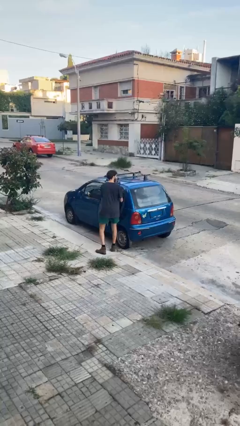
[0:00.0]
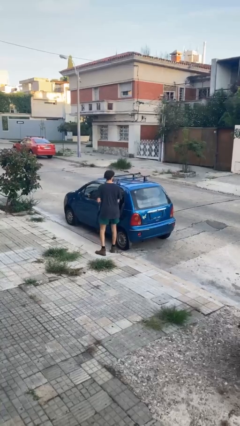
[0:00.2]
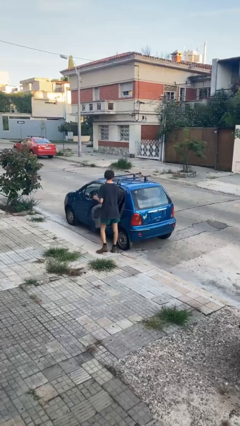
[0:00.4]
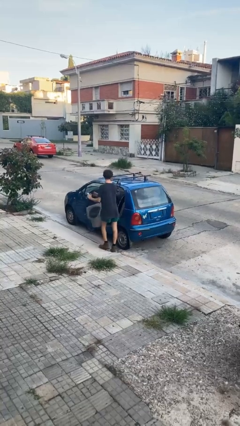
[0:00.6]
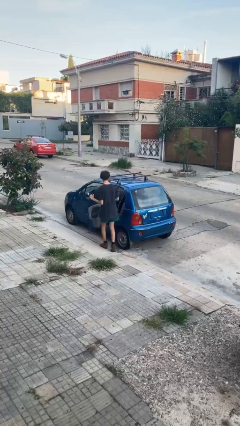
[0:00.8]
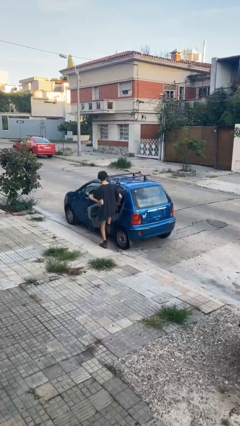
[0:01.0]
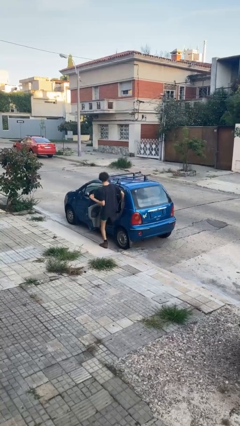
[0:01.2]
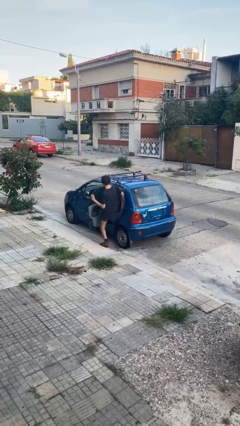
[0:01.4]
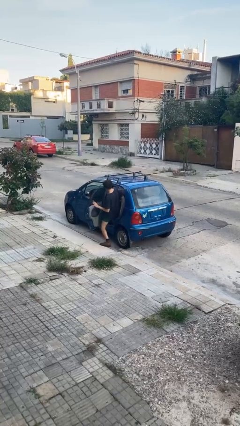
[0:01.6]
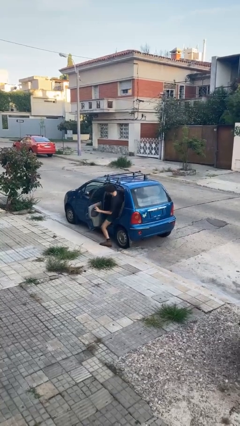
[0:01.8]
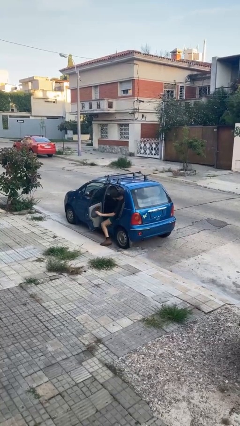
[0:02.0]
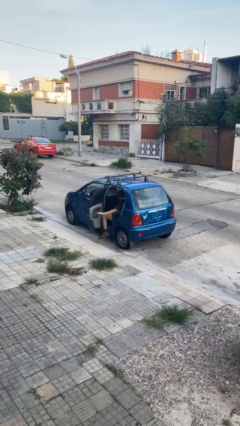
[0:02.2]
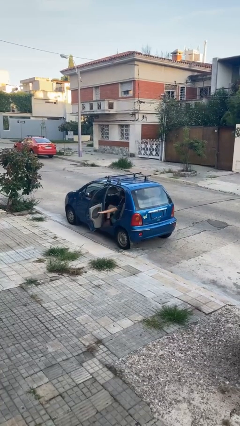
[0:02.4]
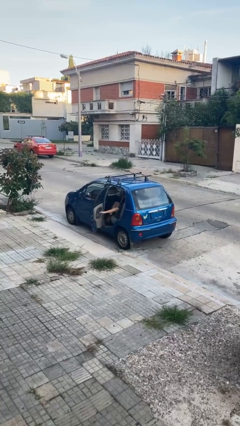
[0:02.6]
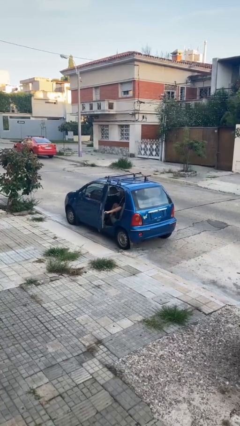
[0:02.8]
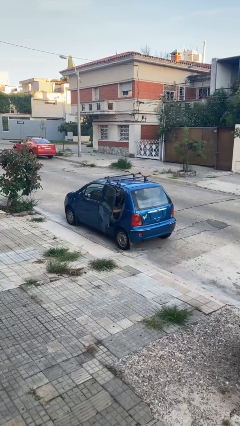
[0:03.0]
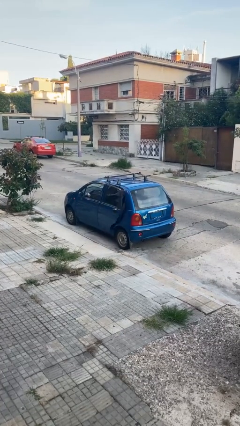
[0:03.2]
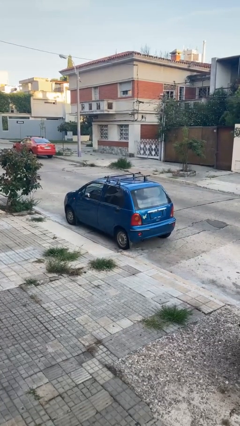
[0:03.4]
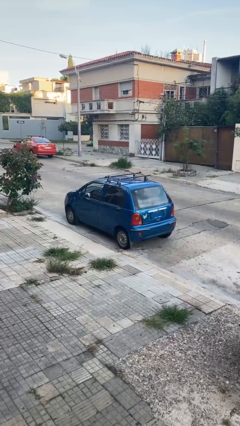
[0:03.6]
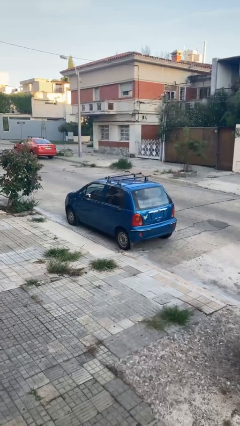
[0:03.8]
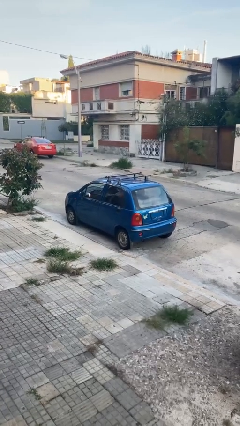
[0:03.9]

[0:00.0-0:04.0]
car picks up person

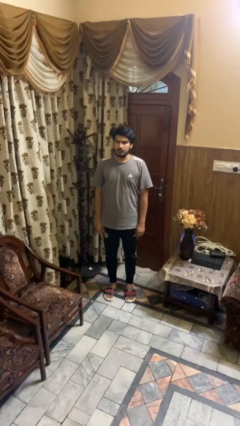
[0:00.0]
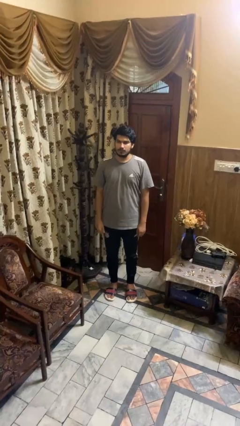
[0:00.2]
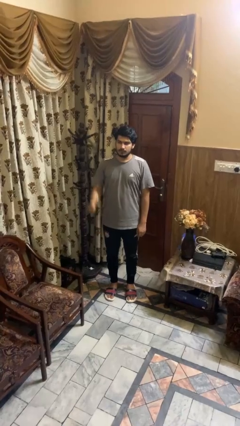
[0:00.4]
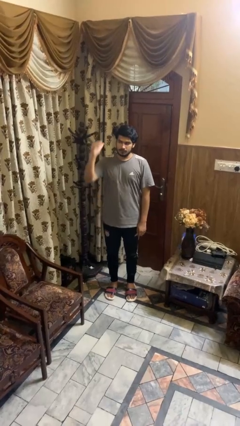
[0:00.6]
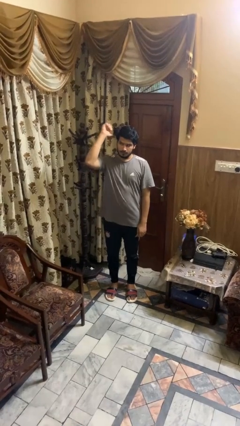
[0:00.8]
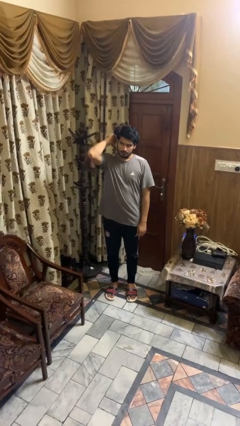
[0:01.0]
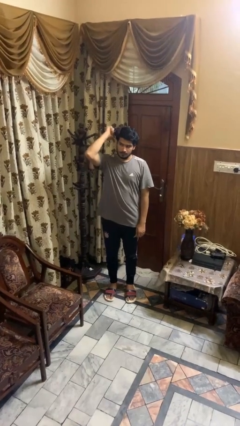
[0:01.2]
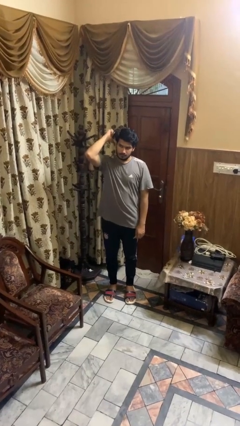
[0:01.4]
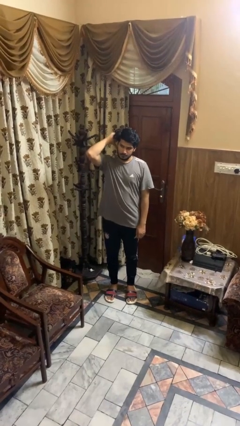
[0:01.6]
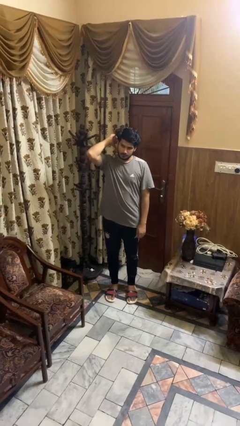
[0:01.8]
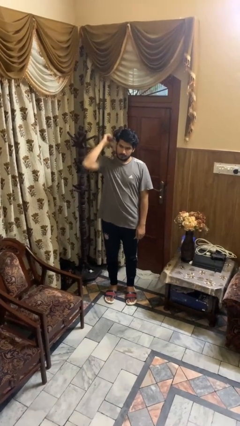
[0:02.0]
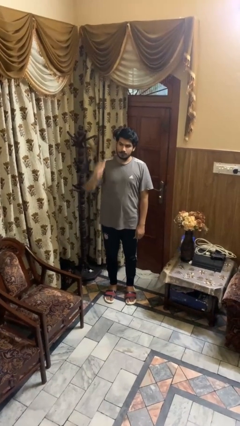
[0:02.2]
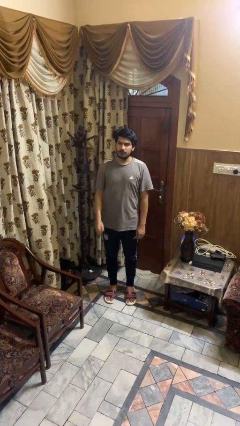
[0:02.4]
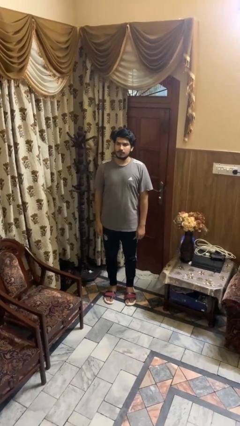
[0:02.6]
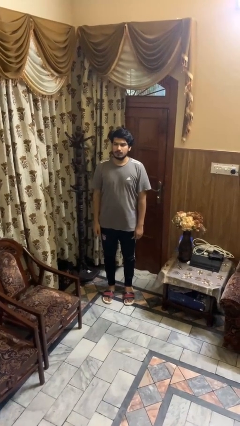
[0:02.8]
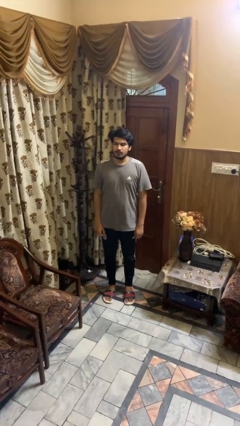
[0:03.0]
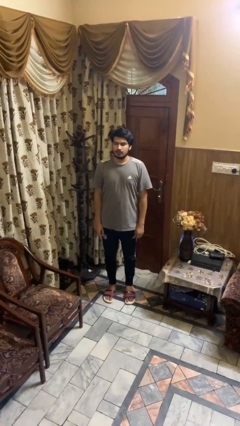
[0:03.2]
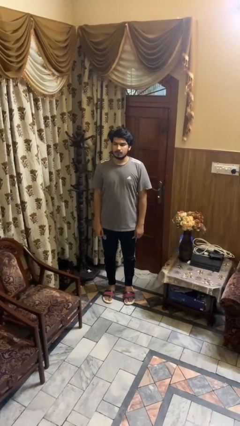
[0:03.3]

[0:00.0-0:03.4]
person gestures behind me

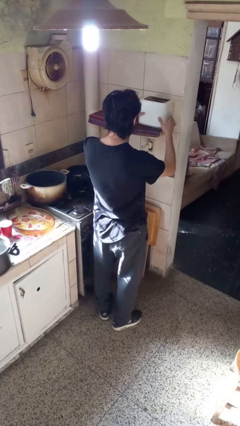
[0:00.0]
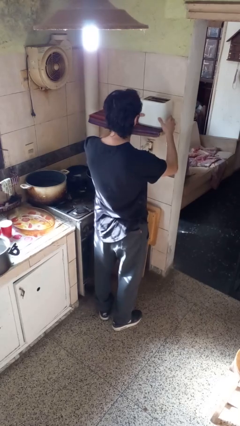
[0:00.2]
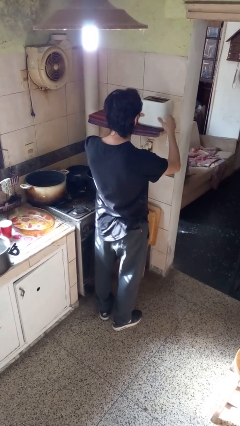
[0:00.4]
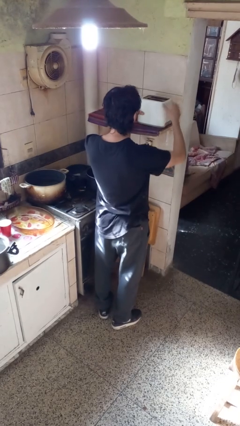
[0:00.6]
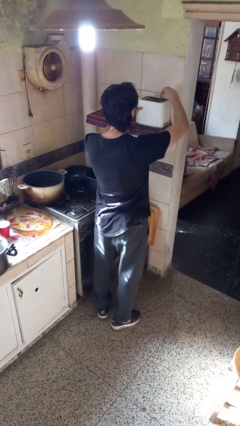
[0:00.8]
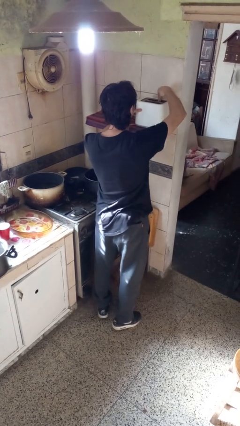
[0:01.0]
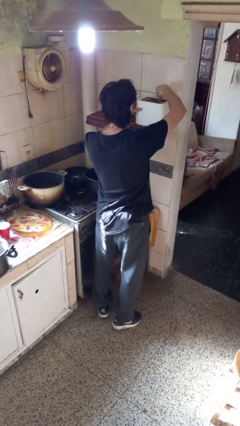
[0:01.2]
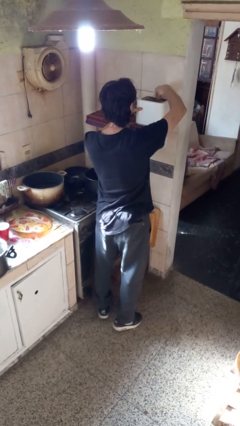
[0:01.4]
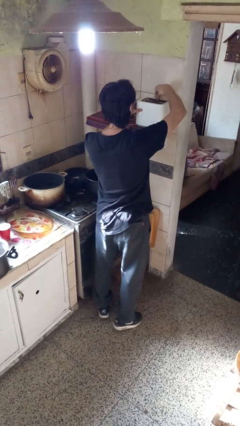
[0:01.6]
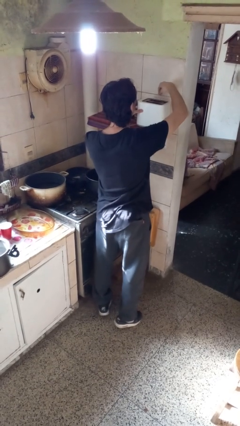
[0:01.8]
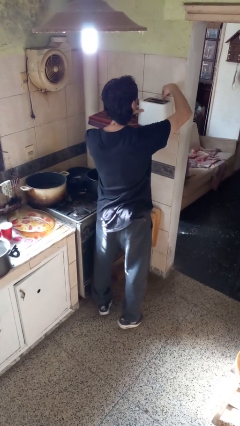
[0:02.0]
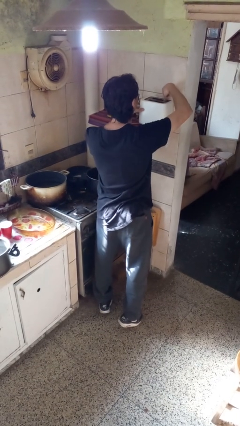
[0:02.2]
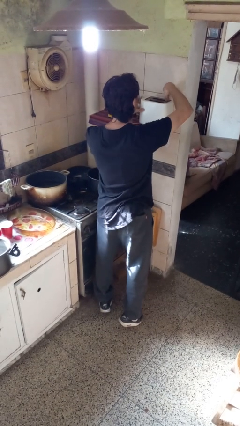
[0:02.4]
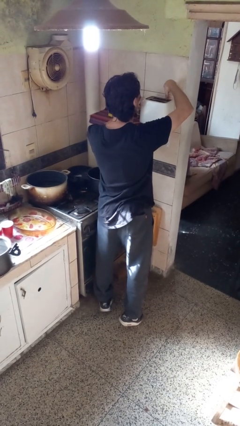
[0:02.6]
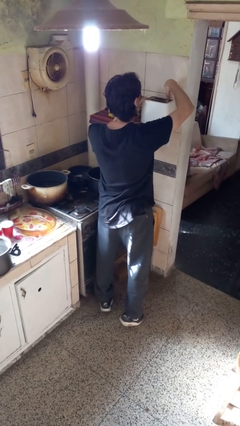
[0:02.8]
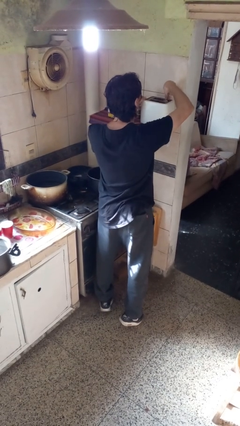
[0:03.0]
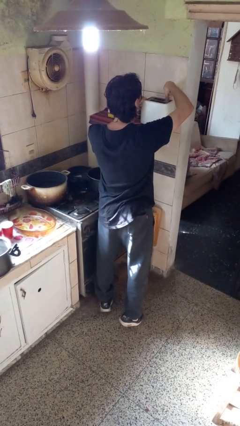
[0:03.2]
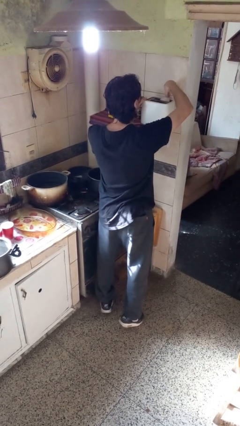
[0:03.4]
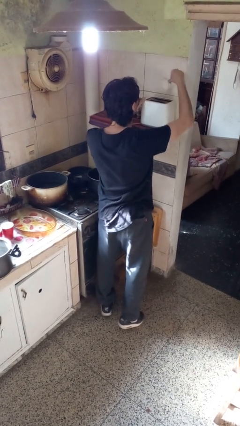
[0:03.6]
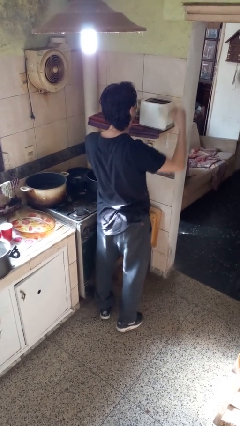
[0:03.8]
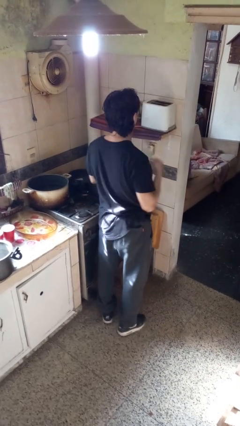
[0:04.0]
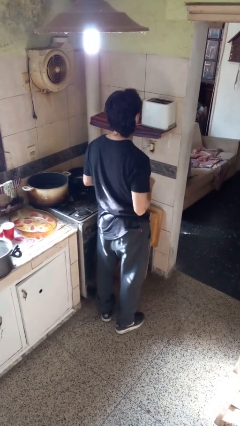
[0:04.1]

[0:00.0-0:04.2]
person takes object from toaster

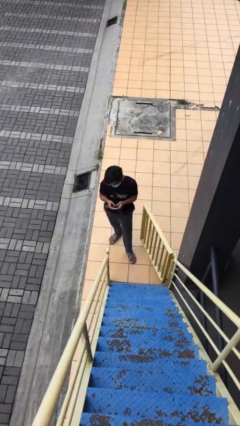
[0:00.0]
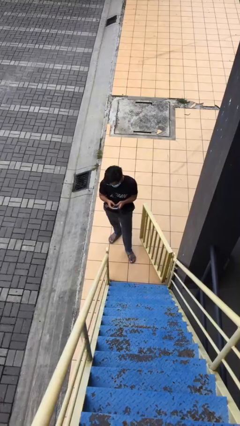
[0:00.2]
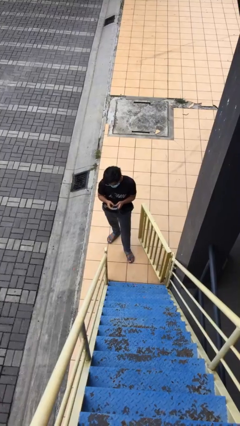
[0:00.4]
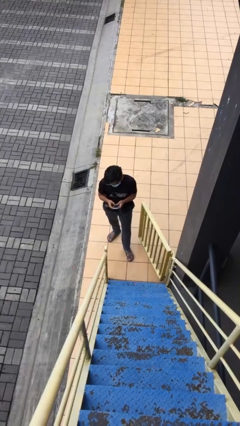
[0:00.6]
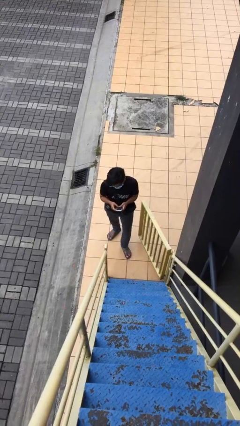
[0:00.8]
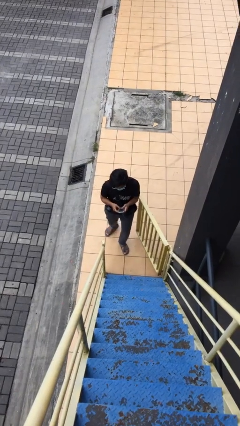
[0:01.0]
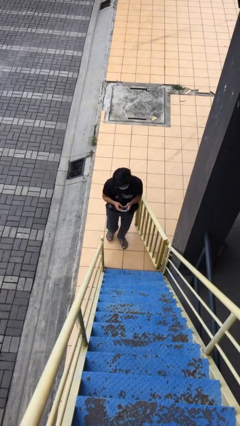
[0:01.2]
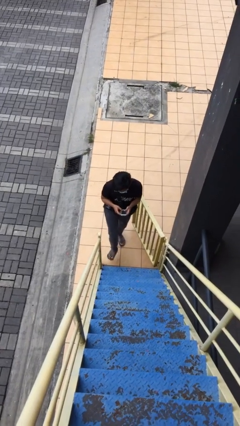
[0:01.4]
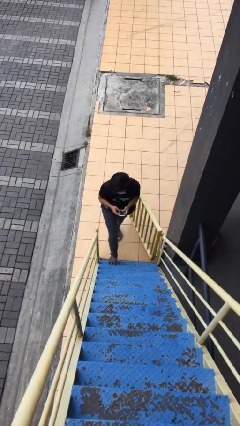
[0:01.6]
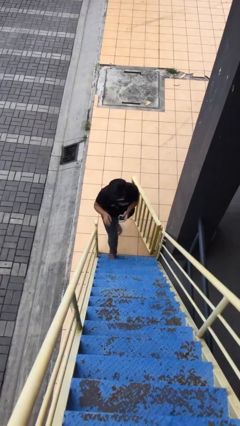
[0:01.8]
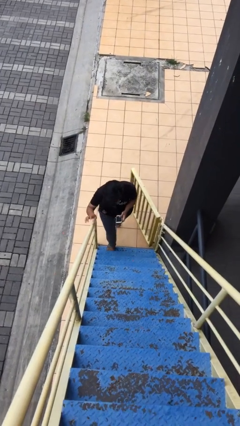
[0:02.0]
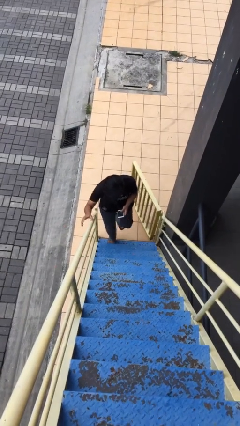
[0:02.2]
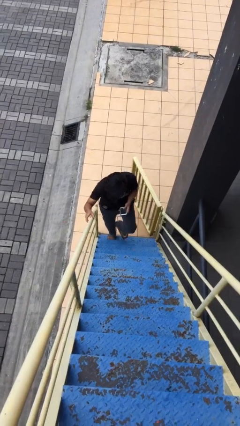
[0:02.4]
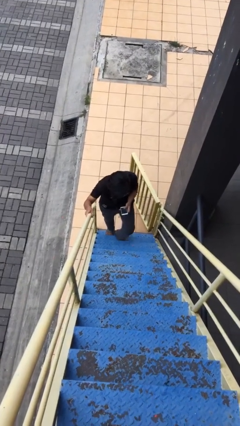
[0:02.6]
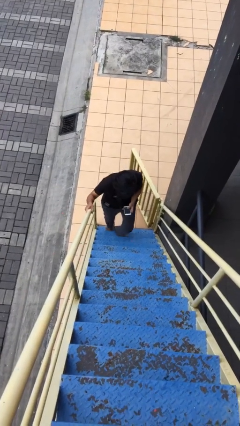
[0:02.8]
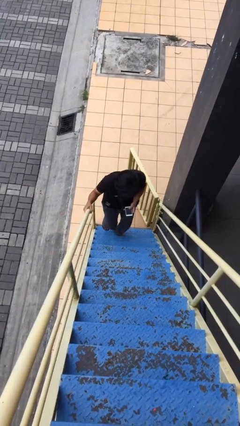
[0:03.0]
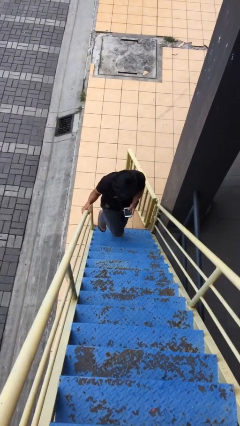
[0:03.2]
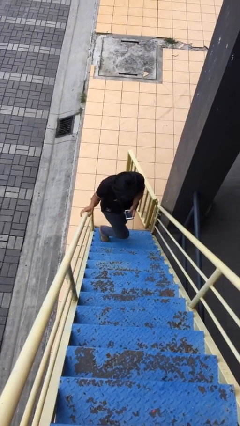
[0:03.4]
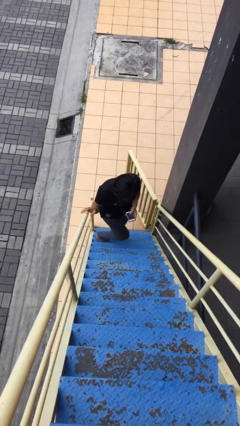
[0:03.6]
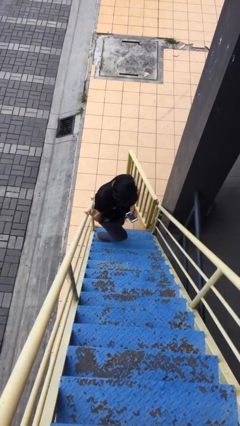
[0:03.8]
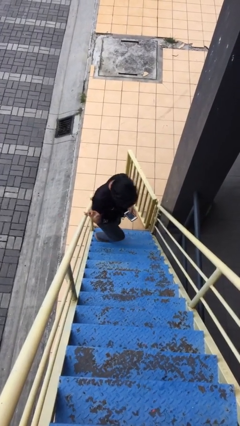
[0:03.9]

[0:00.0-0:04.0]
person enters scene through structure

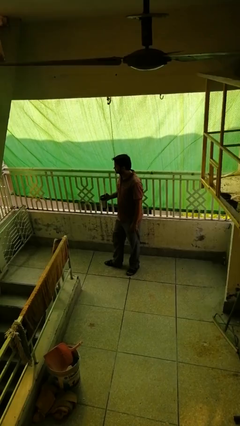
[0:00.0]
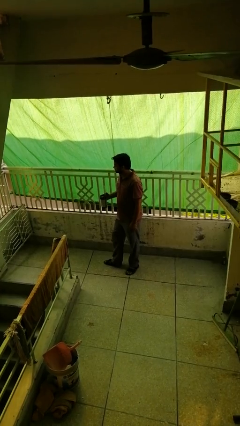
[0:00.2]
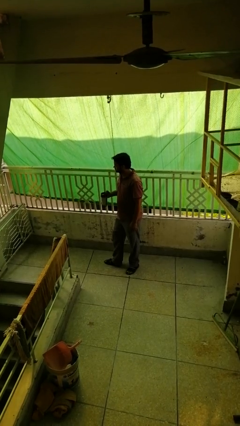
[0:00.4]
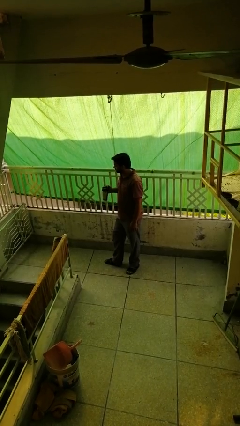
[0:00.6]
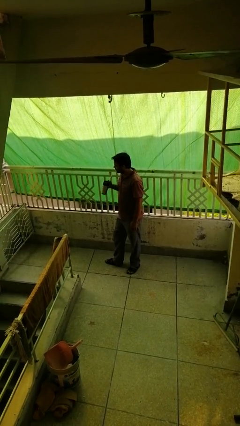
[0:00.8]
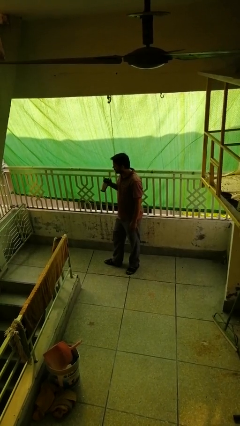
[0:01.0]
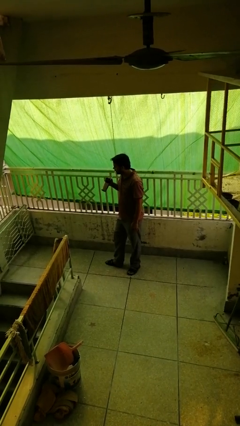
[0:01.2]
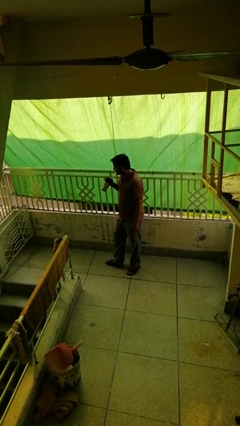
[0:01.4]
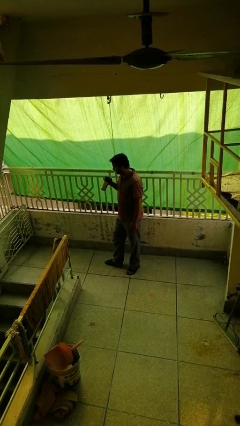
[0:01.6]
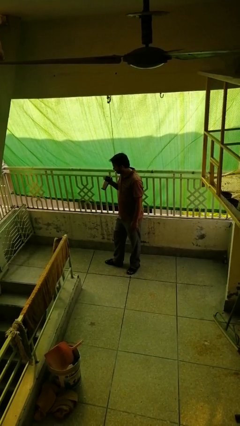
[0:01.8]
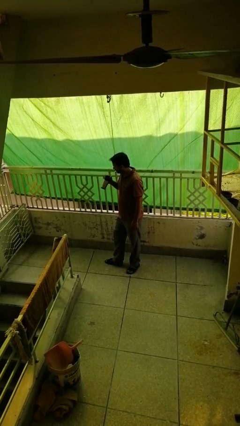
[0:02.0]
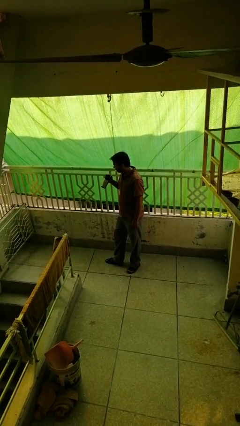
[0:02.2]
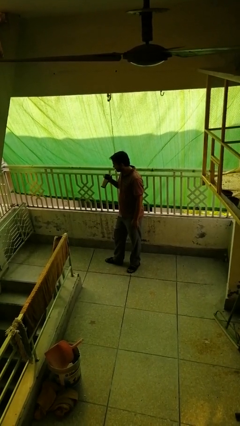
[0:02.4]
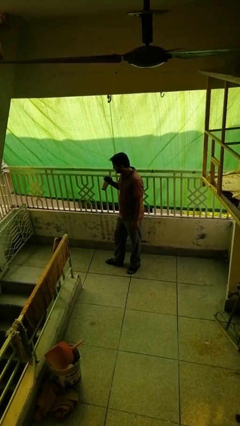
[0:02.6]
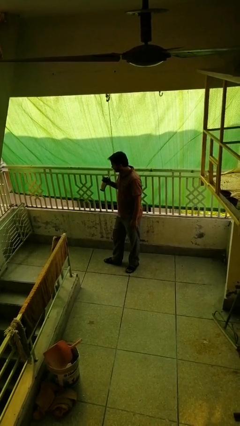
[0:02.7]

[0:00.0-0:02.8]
person drinks from straw
